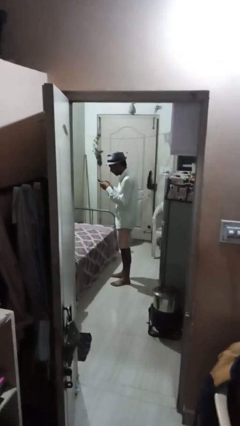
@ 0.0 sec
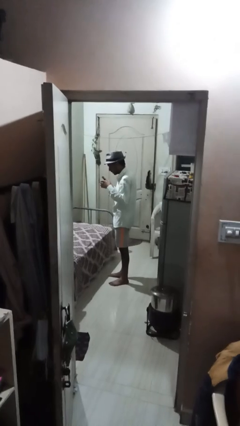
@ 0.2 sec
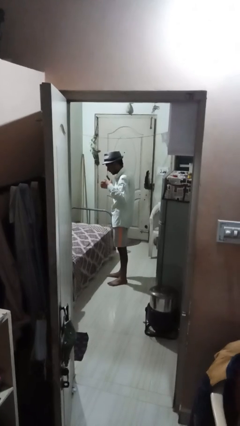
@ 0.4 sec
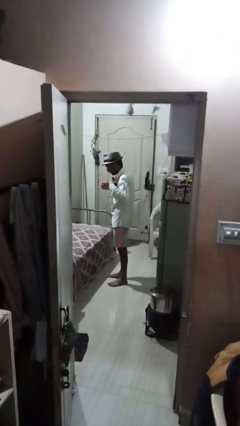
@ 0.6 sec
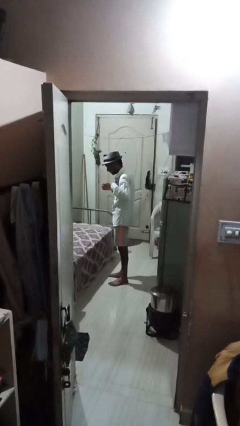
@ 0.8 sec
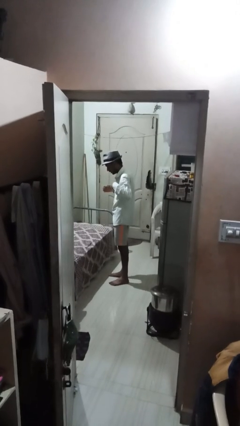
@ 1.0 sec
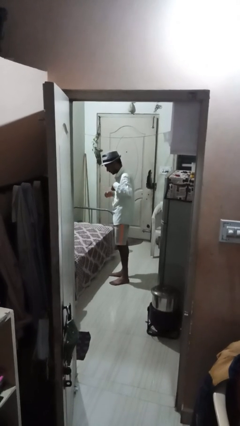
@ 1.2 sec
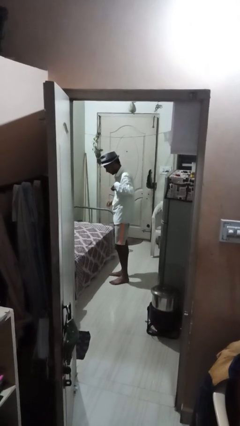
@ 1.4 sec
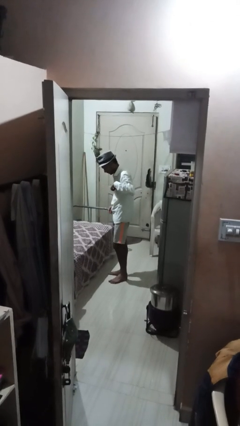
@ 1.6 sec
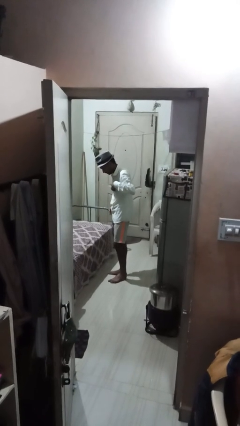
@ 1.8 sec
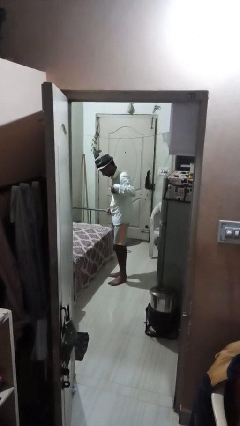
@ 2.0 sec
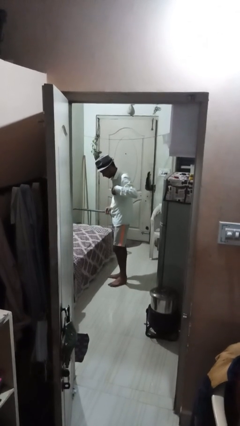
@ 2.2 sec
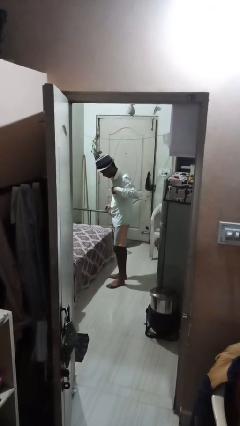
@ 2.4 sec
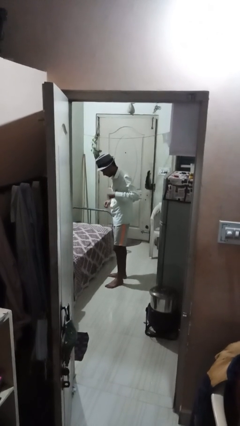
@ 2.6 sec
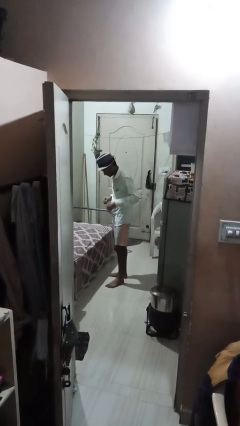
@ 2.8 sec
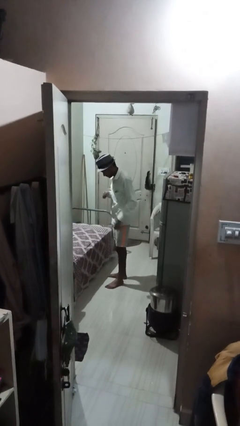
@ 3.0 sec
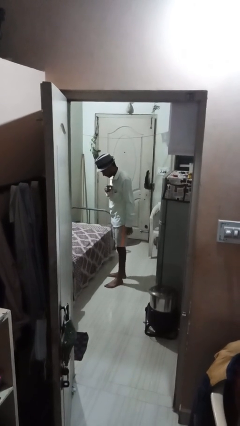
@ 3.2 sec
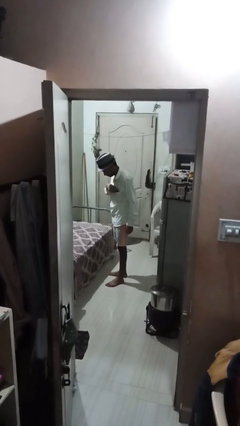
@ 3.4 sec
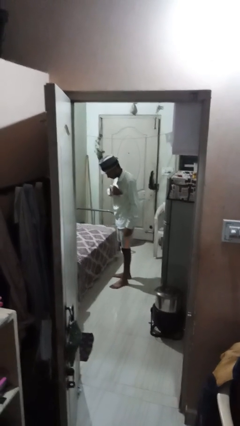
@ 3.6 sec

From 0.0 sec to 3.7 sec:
person puts phone into pocket

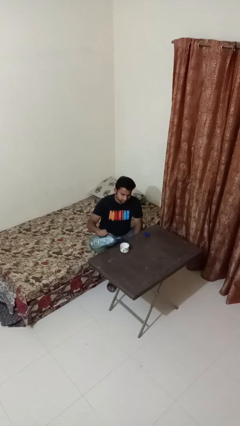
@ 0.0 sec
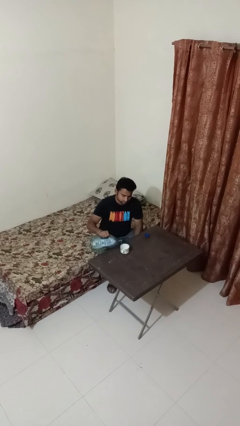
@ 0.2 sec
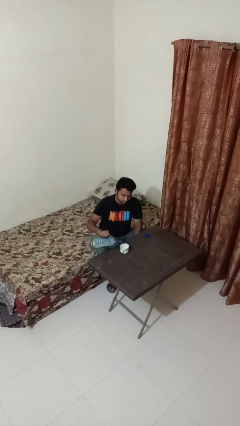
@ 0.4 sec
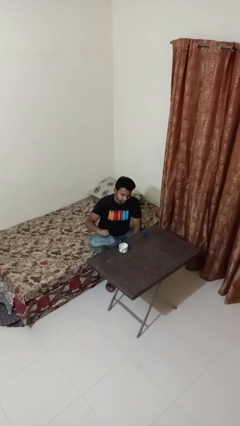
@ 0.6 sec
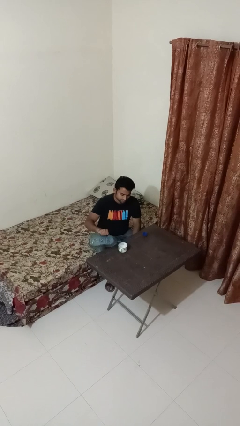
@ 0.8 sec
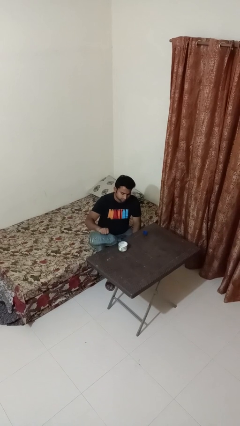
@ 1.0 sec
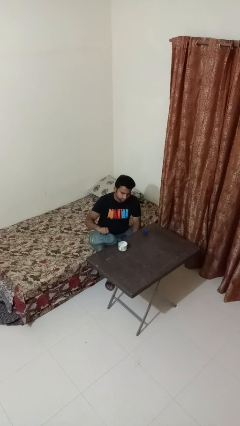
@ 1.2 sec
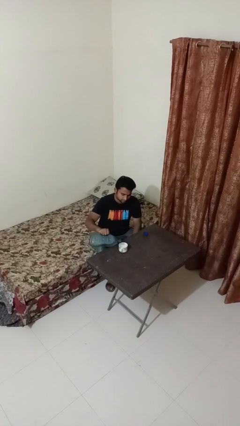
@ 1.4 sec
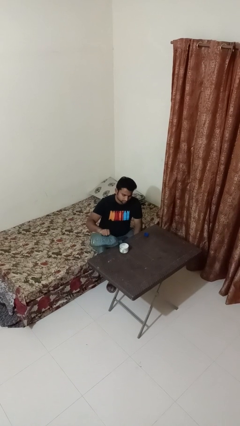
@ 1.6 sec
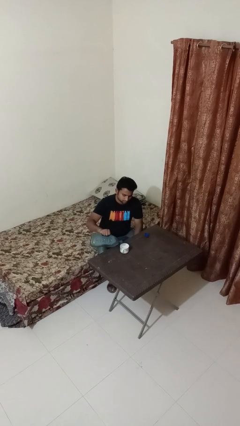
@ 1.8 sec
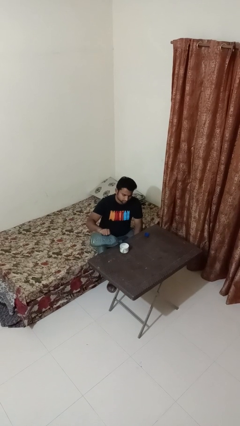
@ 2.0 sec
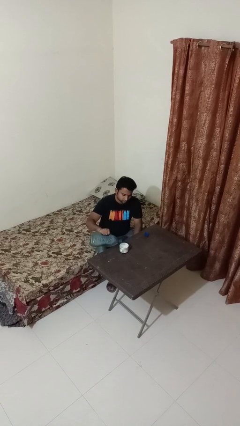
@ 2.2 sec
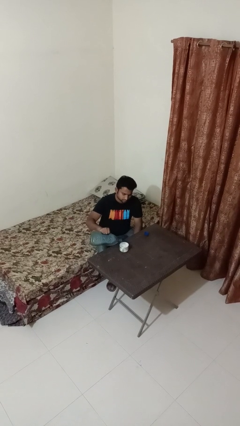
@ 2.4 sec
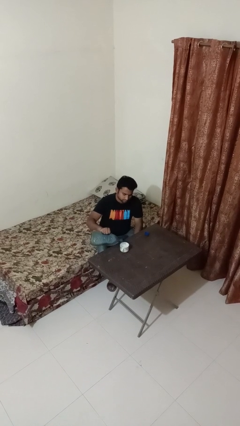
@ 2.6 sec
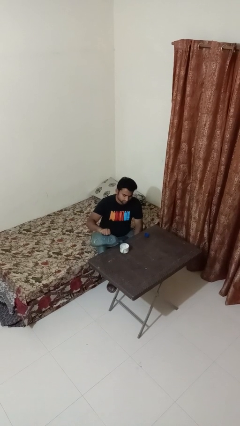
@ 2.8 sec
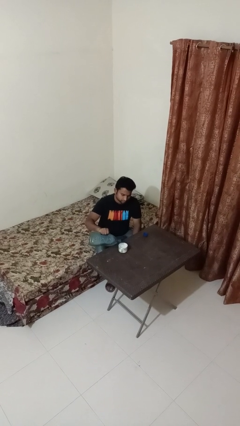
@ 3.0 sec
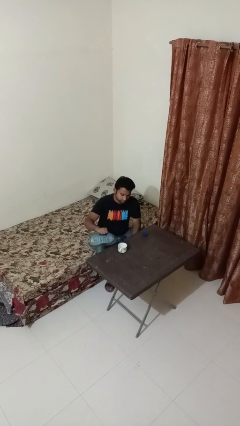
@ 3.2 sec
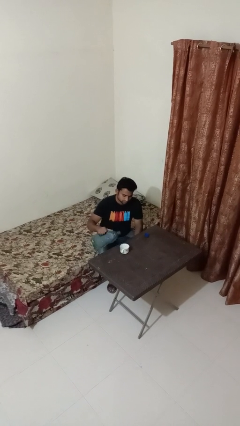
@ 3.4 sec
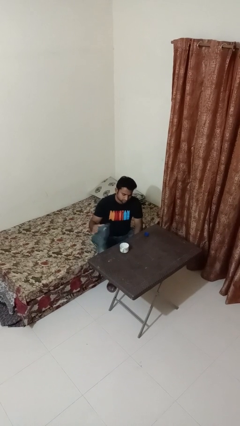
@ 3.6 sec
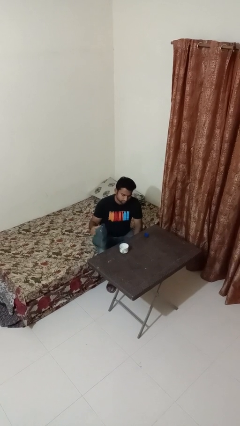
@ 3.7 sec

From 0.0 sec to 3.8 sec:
person pours liquid into cup

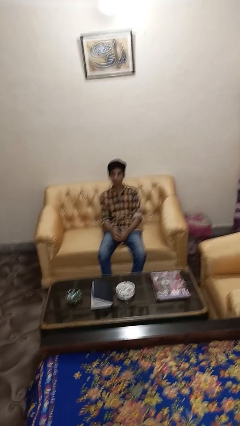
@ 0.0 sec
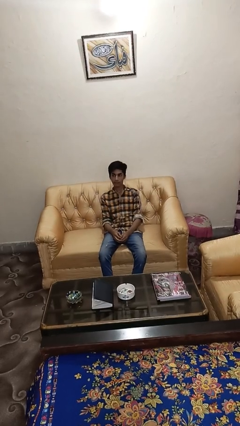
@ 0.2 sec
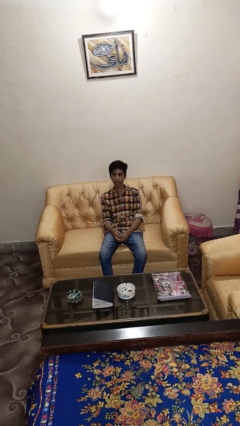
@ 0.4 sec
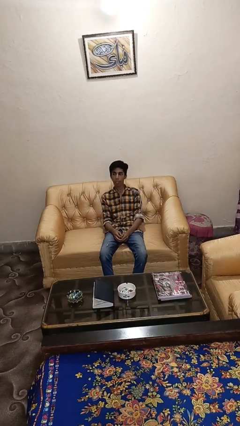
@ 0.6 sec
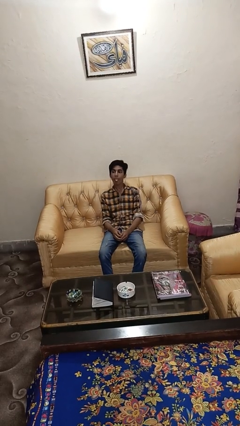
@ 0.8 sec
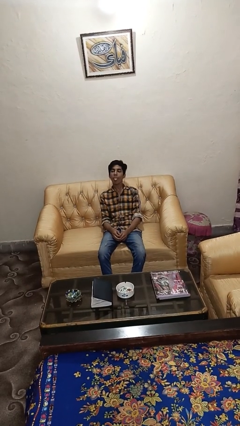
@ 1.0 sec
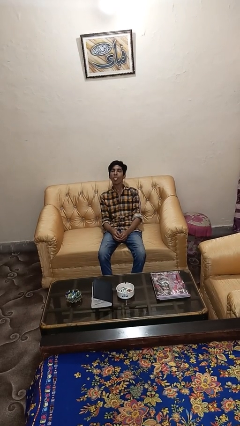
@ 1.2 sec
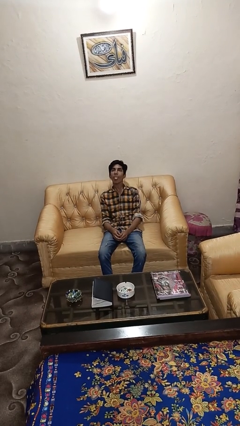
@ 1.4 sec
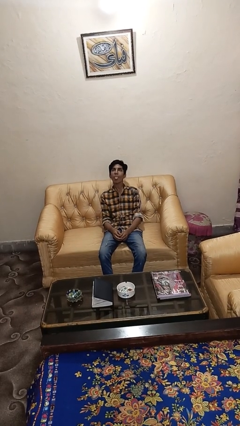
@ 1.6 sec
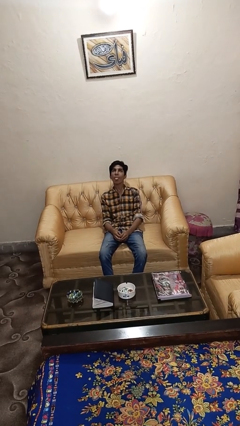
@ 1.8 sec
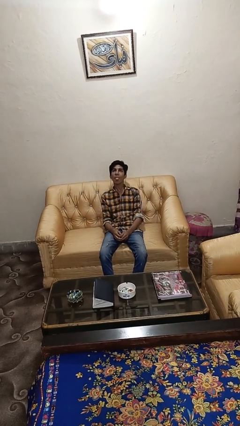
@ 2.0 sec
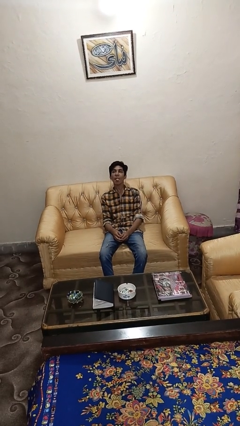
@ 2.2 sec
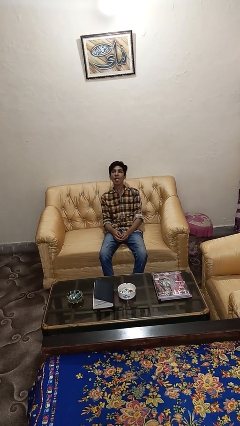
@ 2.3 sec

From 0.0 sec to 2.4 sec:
person sticks out tongue

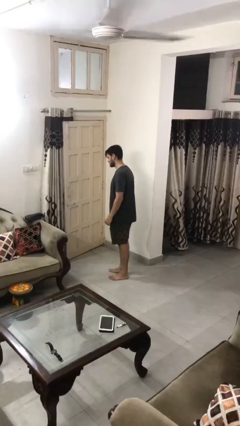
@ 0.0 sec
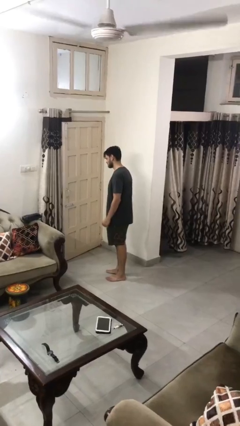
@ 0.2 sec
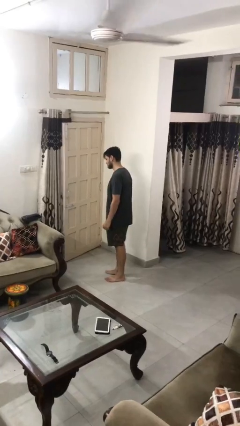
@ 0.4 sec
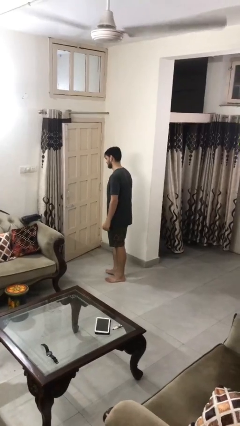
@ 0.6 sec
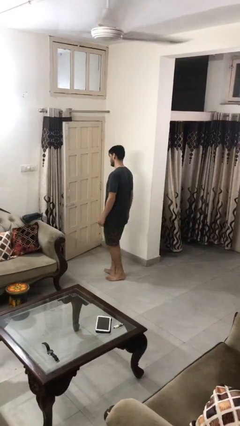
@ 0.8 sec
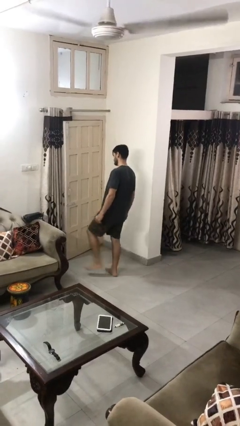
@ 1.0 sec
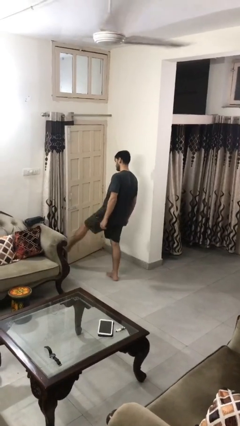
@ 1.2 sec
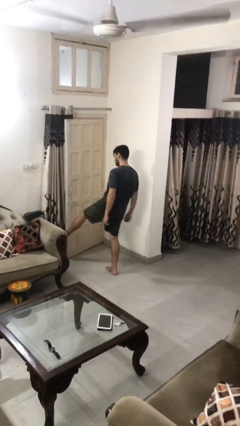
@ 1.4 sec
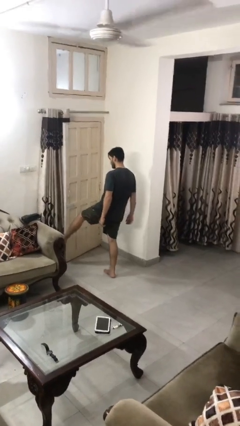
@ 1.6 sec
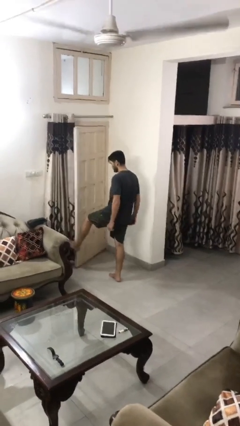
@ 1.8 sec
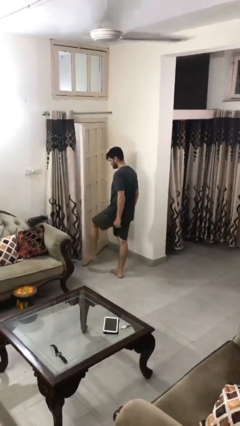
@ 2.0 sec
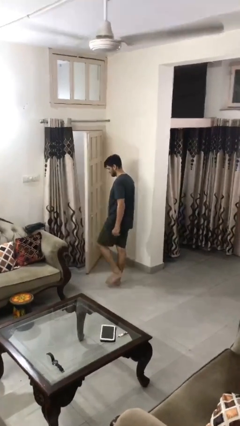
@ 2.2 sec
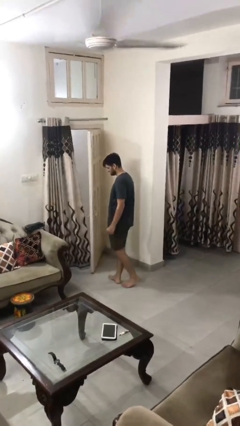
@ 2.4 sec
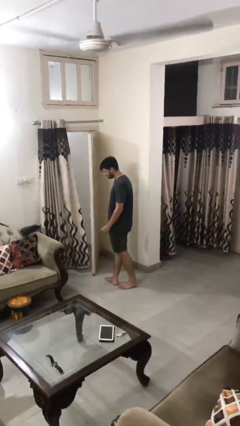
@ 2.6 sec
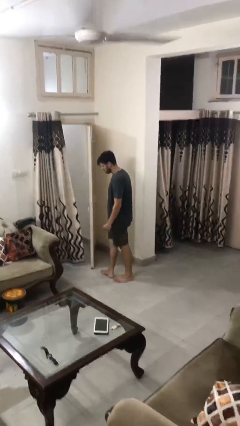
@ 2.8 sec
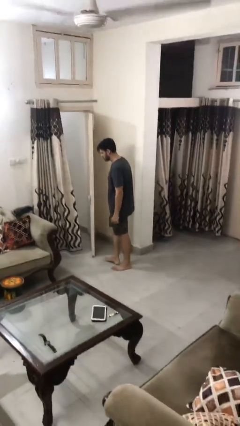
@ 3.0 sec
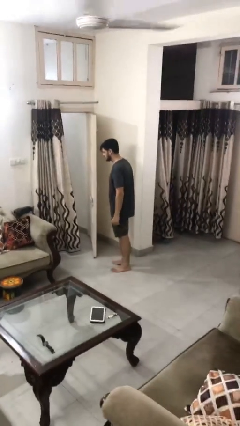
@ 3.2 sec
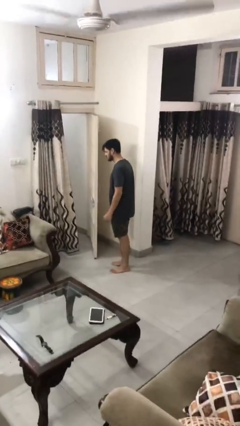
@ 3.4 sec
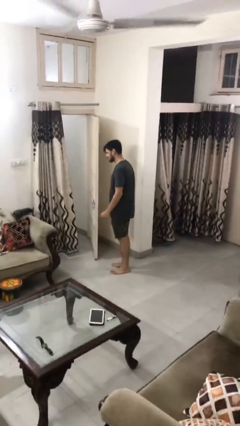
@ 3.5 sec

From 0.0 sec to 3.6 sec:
person opens facility door

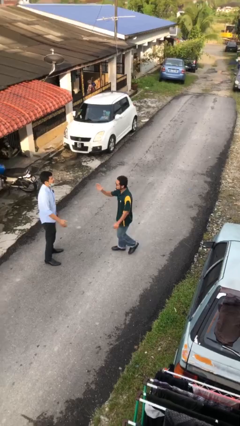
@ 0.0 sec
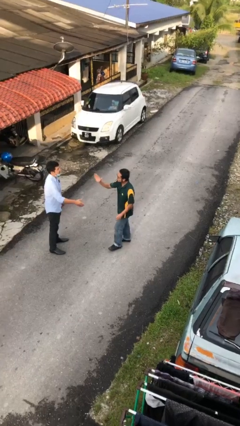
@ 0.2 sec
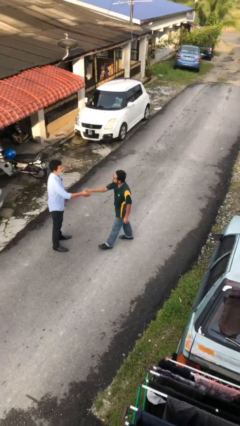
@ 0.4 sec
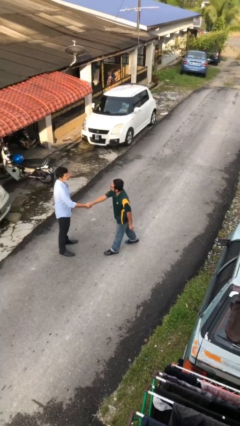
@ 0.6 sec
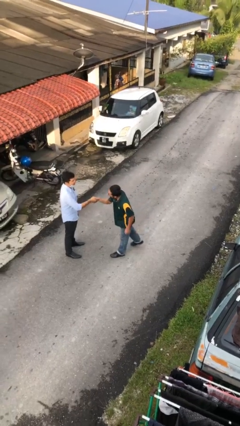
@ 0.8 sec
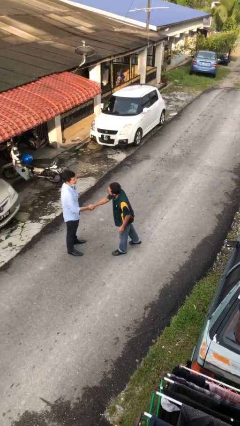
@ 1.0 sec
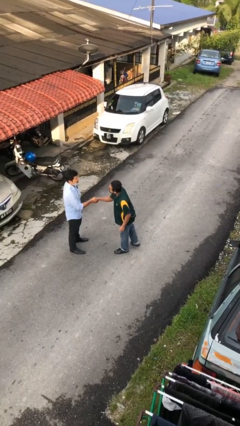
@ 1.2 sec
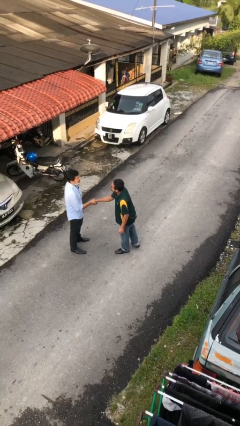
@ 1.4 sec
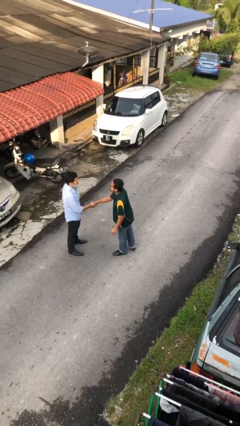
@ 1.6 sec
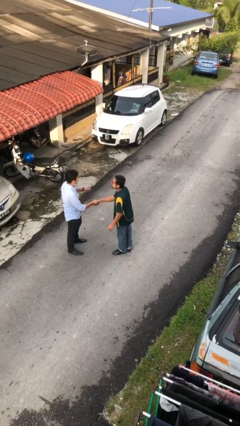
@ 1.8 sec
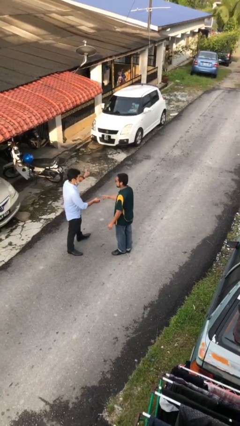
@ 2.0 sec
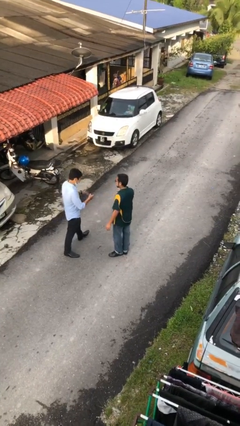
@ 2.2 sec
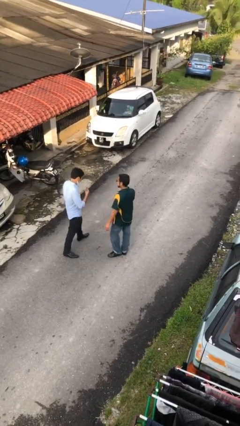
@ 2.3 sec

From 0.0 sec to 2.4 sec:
person shakes hand

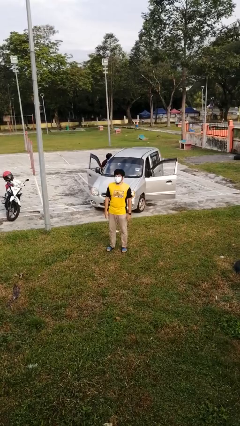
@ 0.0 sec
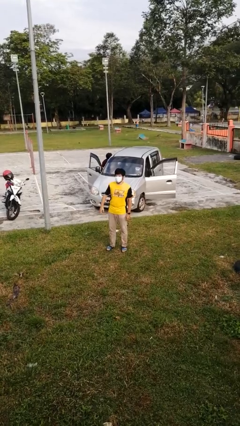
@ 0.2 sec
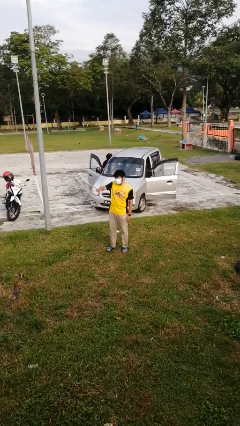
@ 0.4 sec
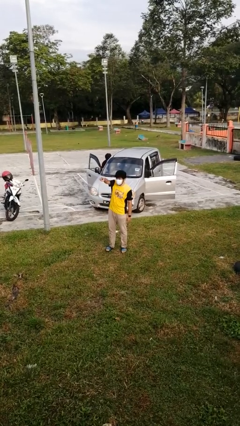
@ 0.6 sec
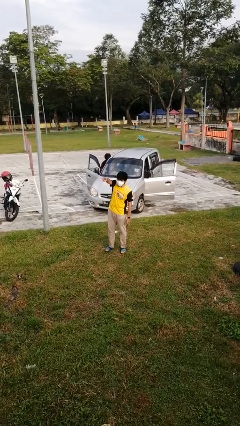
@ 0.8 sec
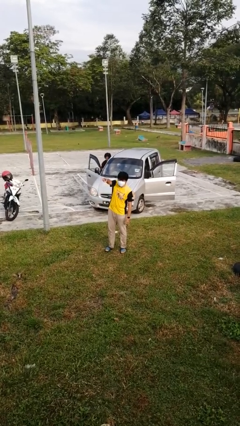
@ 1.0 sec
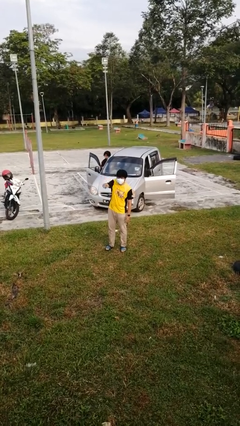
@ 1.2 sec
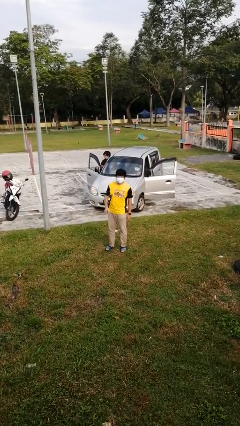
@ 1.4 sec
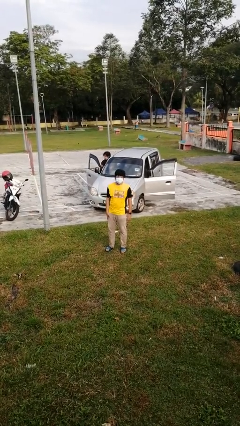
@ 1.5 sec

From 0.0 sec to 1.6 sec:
person points at person
